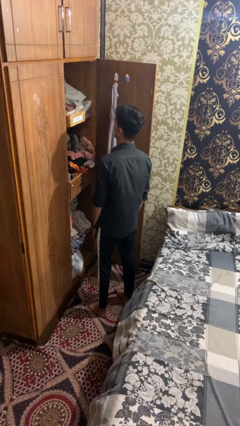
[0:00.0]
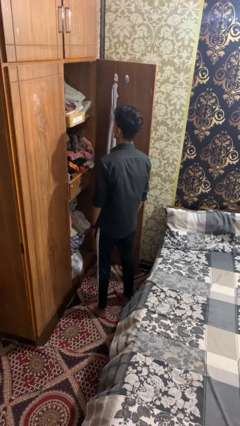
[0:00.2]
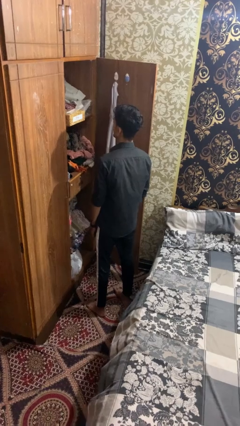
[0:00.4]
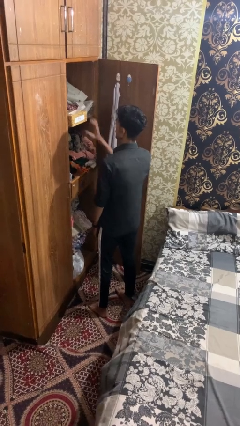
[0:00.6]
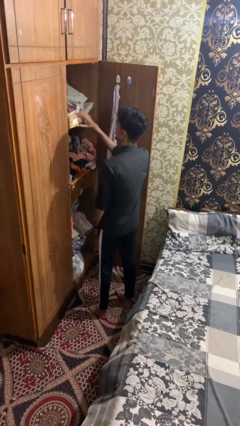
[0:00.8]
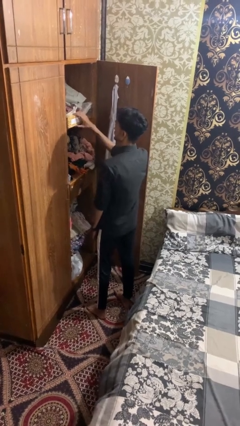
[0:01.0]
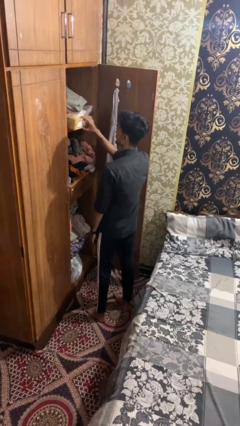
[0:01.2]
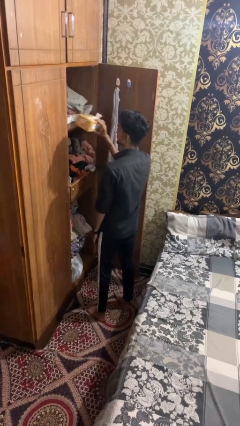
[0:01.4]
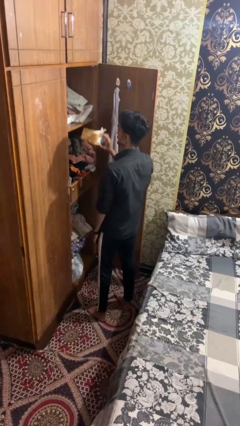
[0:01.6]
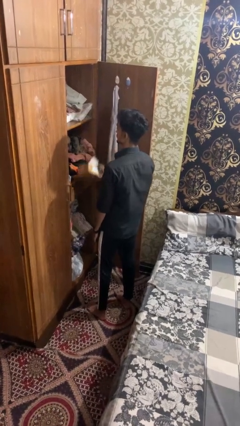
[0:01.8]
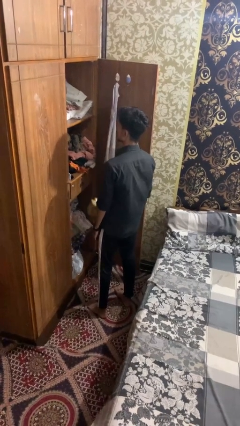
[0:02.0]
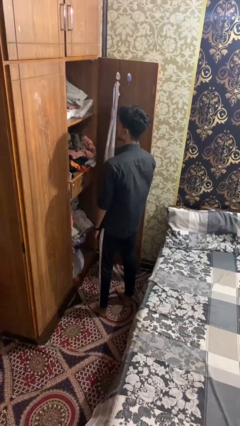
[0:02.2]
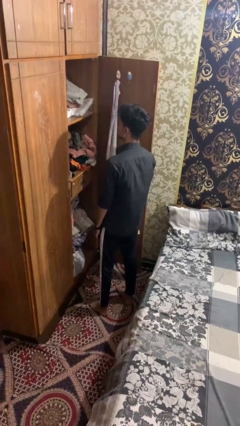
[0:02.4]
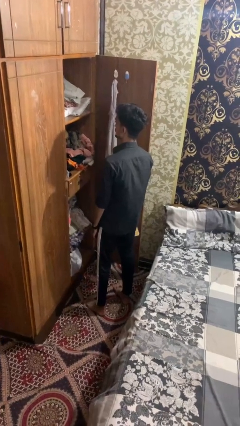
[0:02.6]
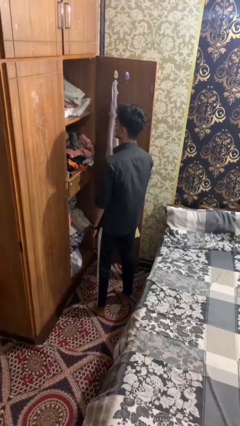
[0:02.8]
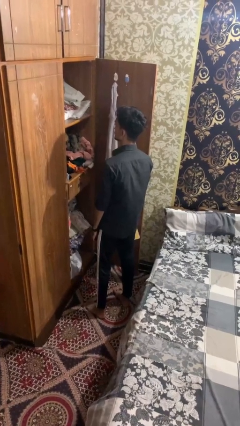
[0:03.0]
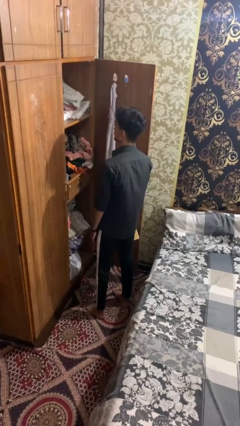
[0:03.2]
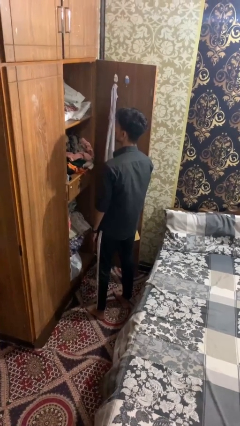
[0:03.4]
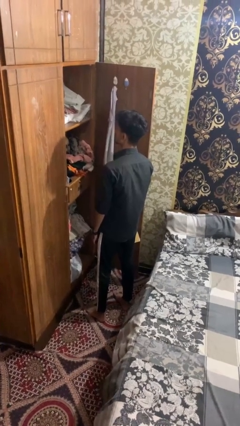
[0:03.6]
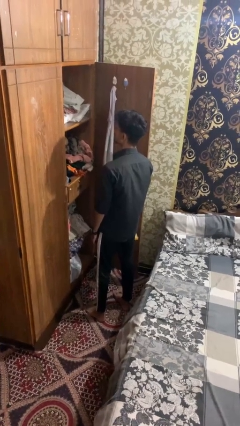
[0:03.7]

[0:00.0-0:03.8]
person picks up object from countertop

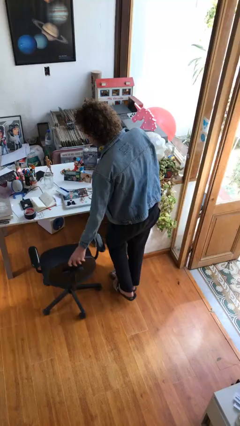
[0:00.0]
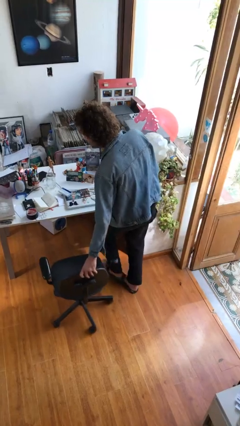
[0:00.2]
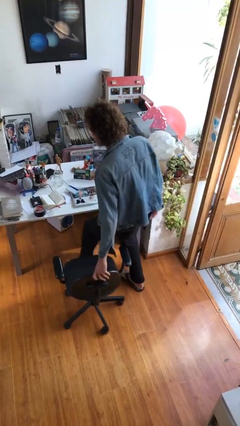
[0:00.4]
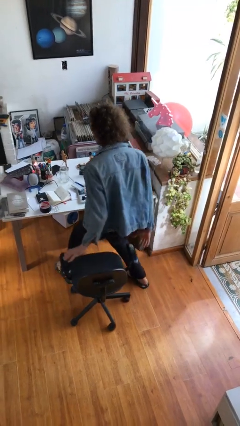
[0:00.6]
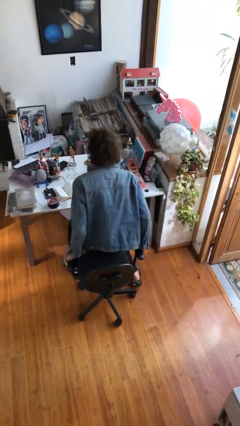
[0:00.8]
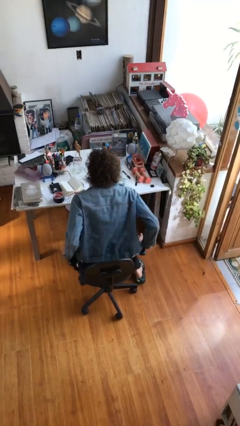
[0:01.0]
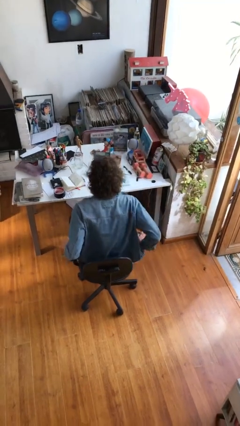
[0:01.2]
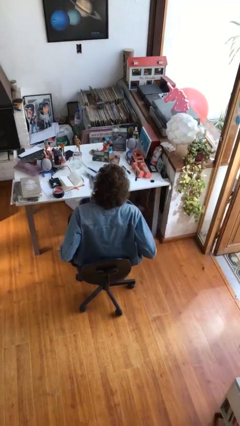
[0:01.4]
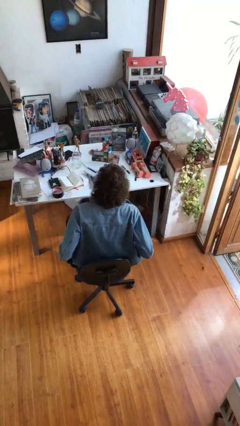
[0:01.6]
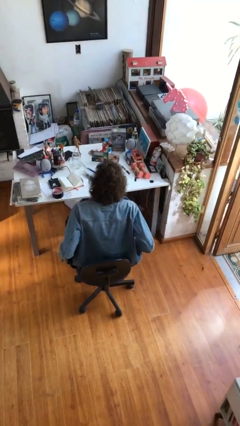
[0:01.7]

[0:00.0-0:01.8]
person sits down

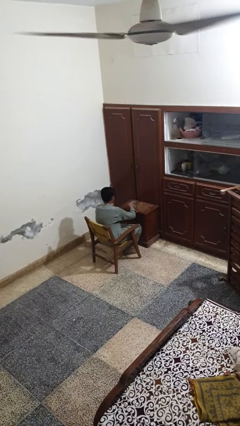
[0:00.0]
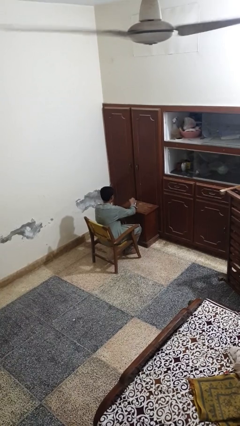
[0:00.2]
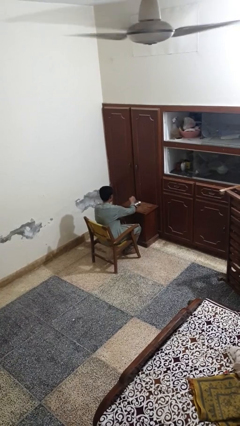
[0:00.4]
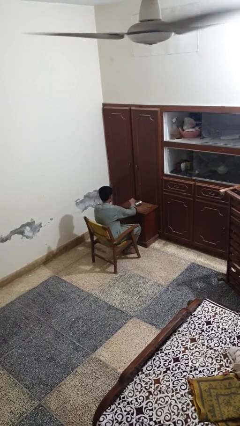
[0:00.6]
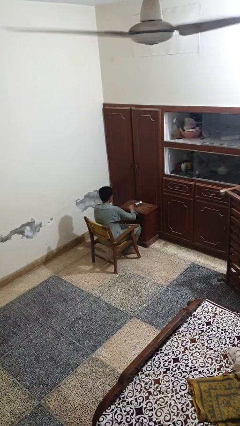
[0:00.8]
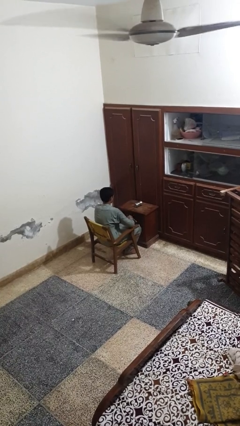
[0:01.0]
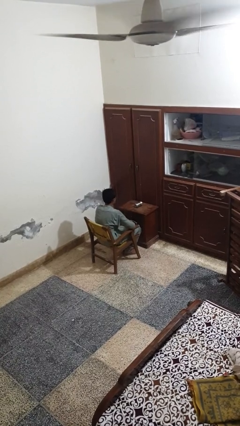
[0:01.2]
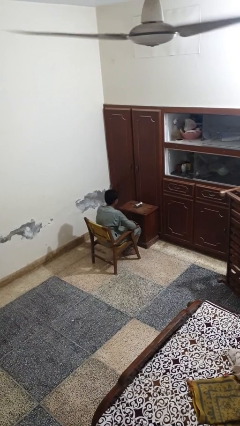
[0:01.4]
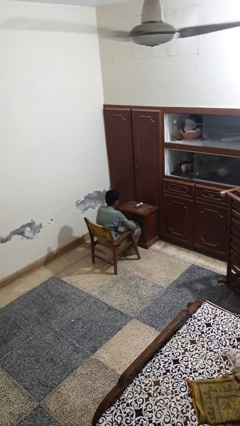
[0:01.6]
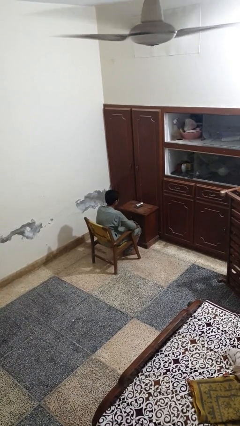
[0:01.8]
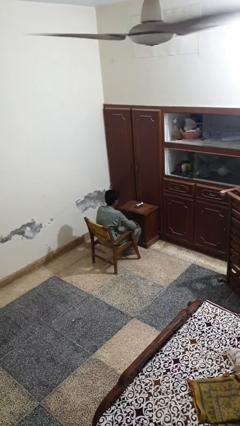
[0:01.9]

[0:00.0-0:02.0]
person knocks over glass

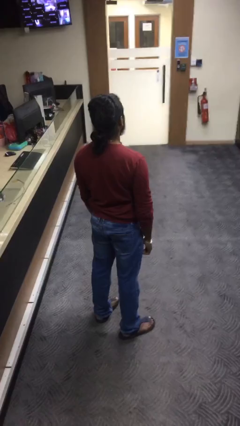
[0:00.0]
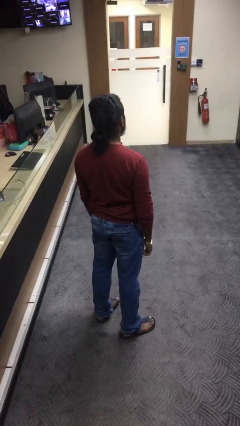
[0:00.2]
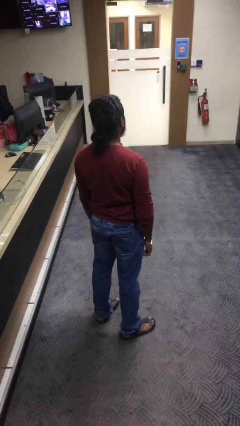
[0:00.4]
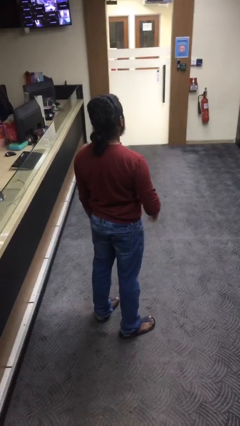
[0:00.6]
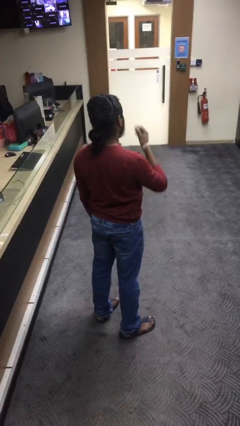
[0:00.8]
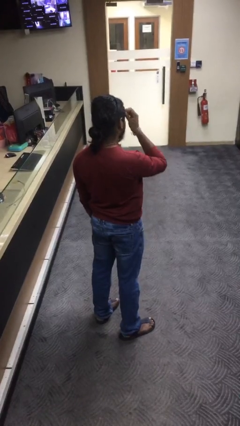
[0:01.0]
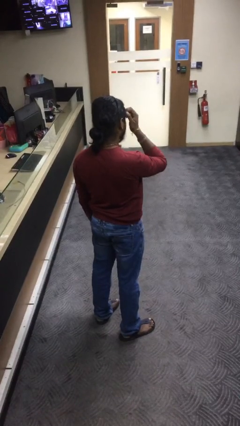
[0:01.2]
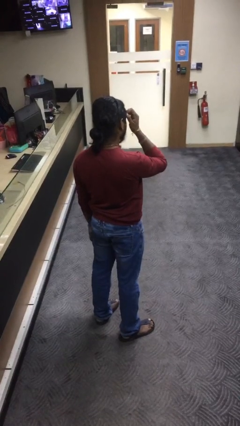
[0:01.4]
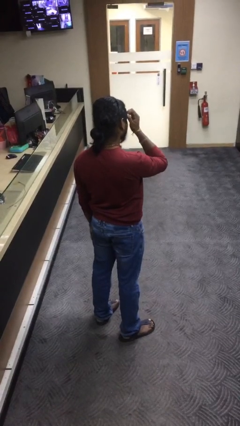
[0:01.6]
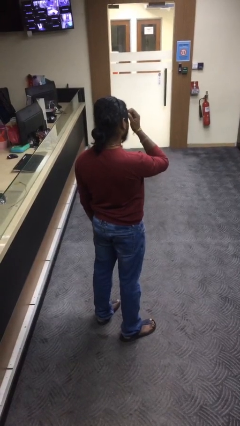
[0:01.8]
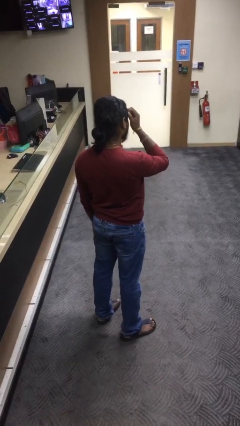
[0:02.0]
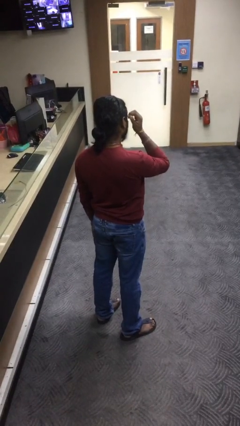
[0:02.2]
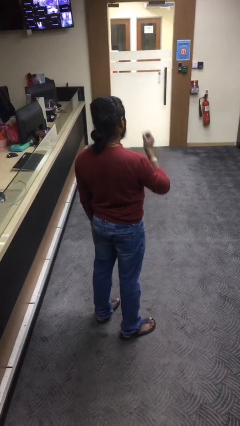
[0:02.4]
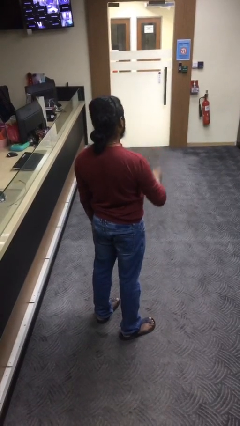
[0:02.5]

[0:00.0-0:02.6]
person scratches face

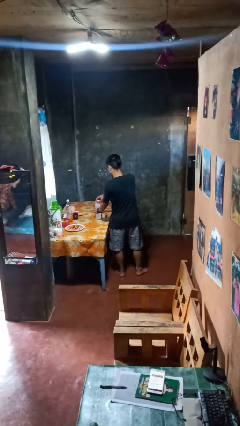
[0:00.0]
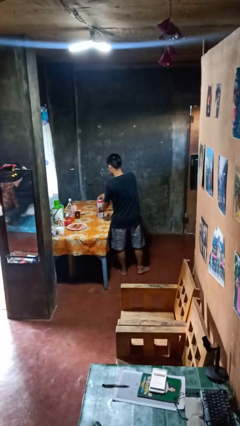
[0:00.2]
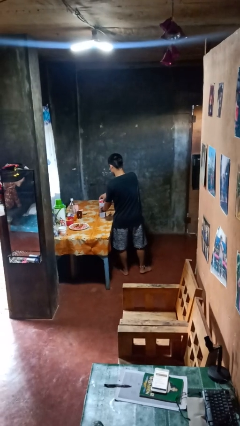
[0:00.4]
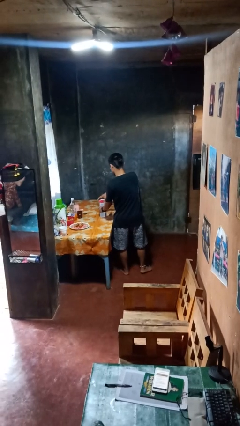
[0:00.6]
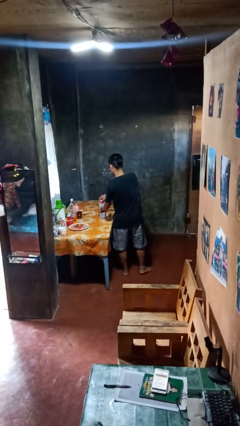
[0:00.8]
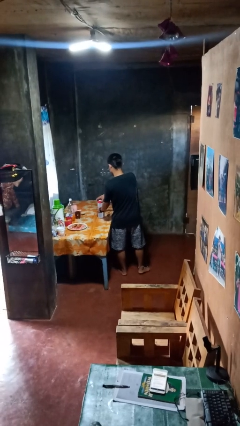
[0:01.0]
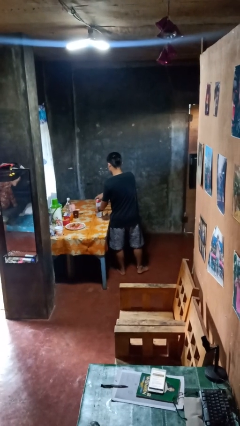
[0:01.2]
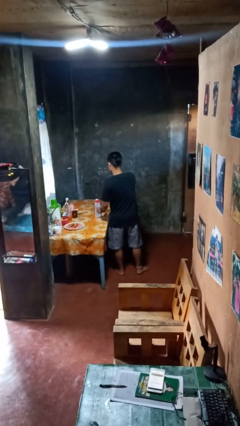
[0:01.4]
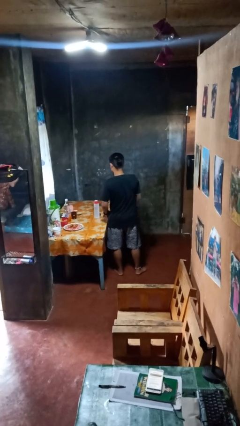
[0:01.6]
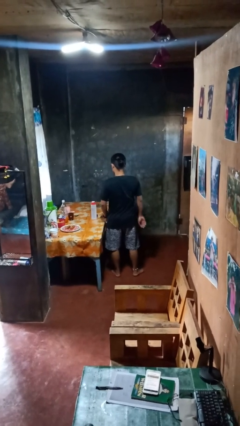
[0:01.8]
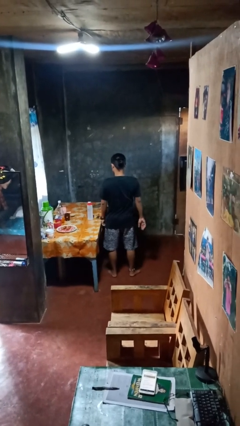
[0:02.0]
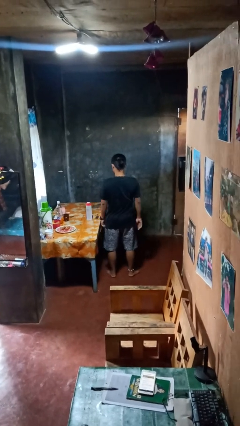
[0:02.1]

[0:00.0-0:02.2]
person closes jar

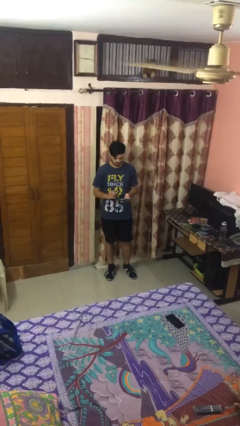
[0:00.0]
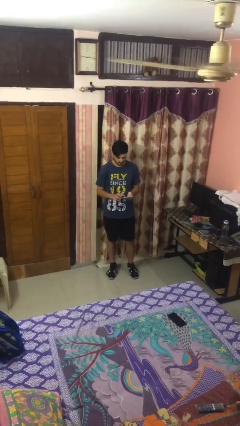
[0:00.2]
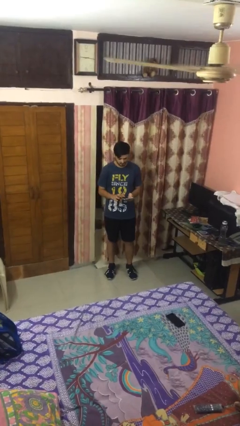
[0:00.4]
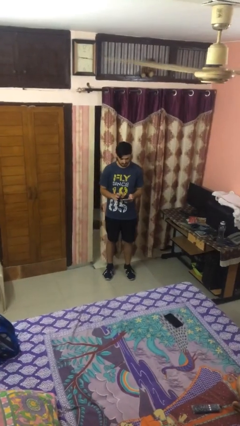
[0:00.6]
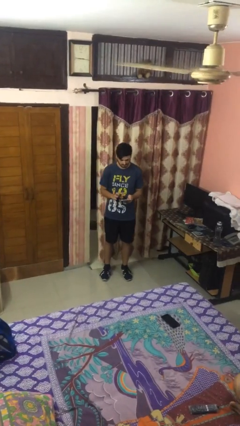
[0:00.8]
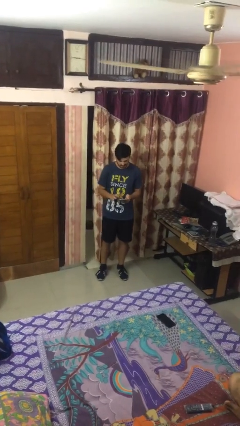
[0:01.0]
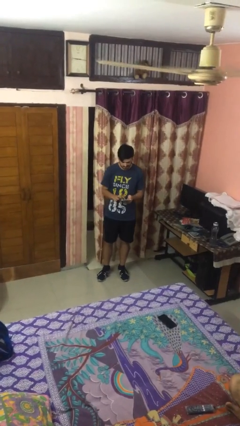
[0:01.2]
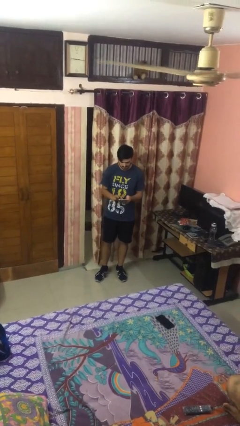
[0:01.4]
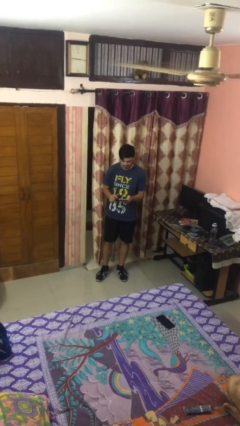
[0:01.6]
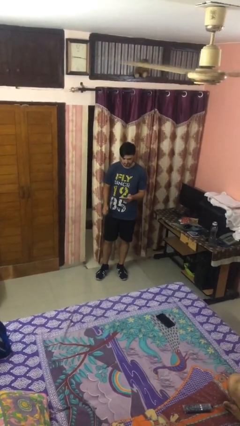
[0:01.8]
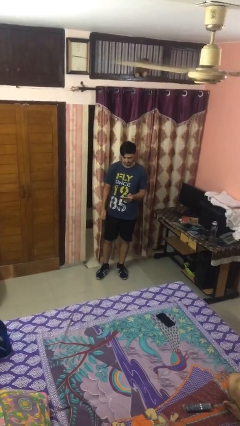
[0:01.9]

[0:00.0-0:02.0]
person interacts with tablet

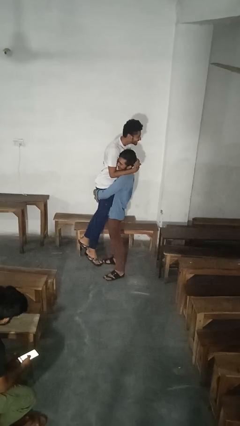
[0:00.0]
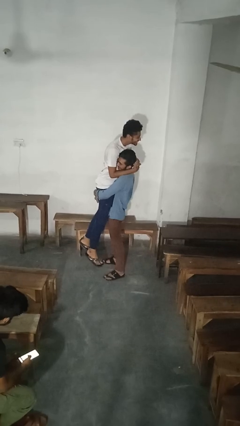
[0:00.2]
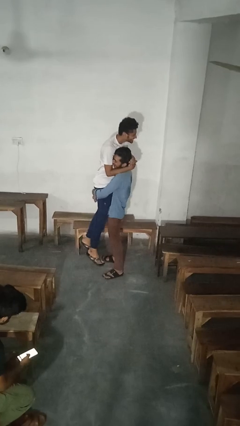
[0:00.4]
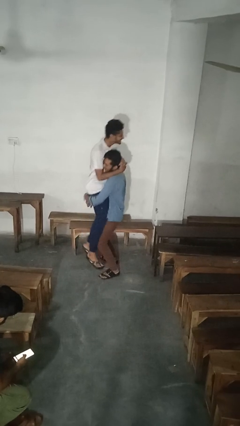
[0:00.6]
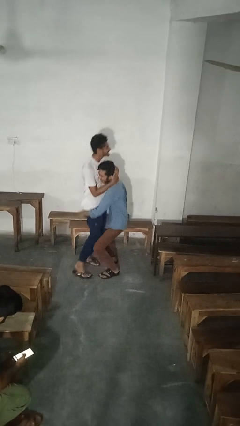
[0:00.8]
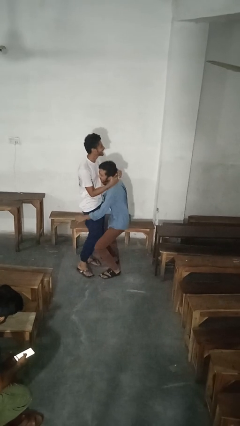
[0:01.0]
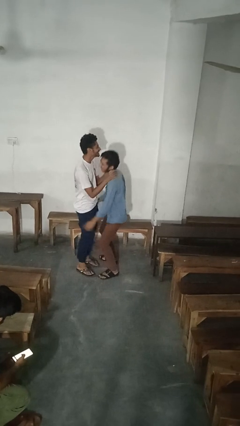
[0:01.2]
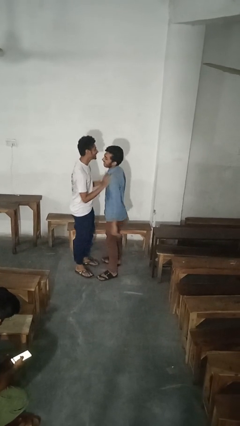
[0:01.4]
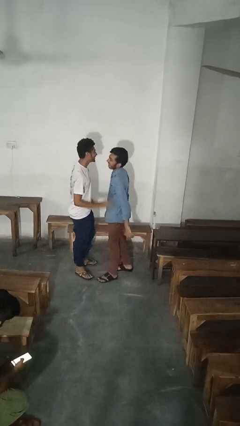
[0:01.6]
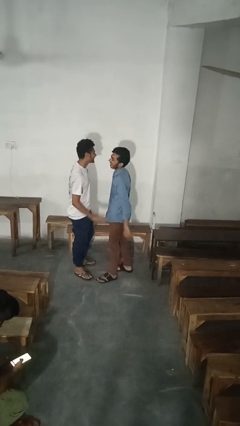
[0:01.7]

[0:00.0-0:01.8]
person puts down person

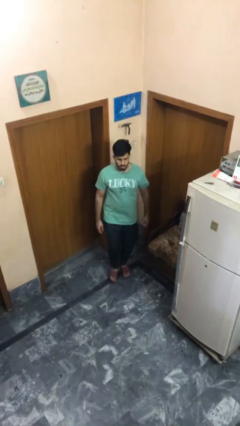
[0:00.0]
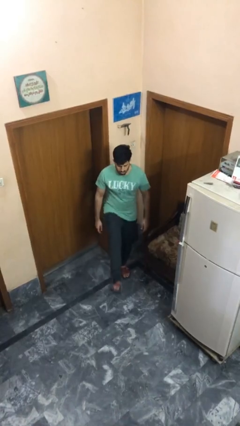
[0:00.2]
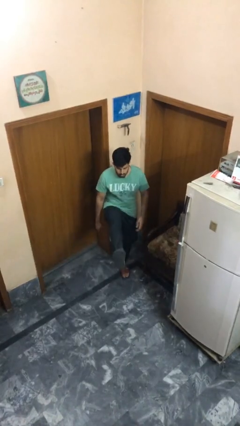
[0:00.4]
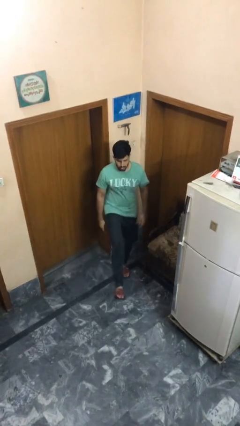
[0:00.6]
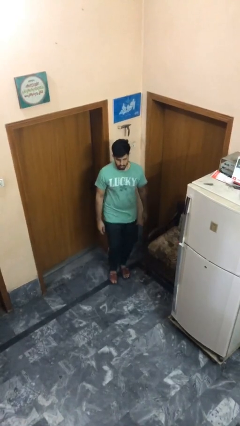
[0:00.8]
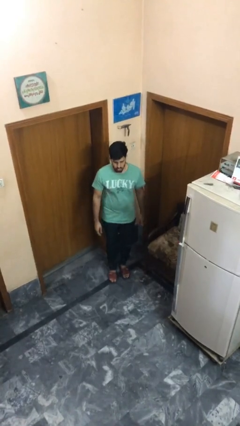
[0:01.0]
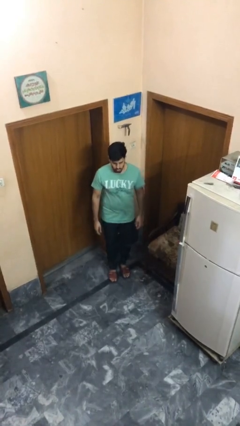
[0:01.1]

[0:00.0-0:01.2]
person karate kicks
